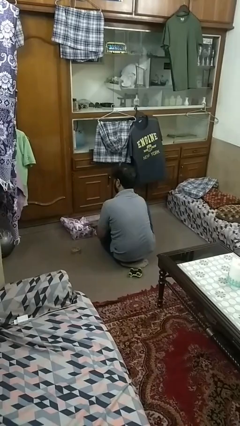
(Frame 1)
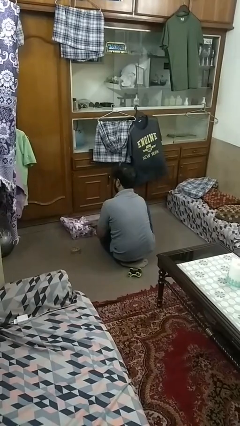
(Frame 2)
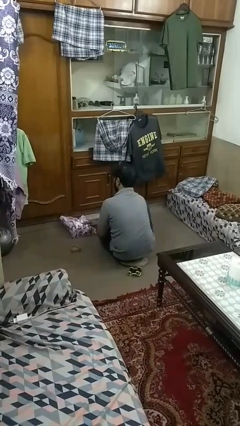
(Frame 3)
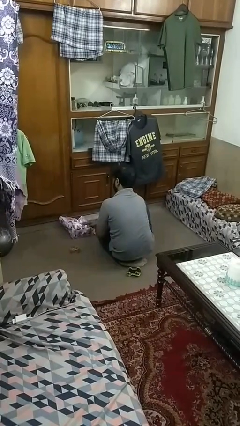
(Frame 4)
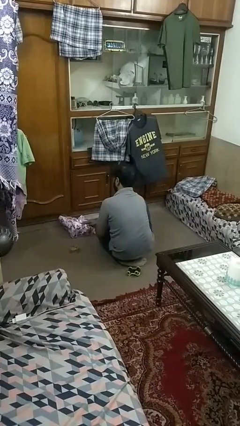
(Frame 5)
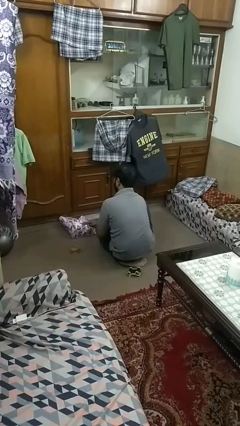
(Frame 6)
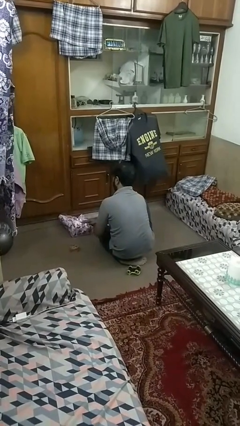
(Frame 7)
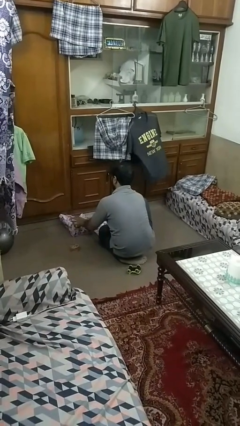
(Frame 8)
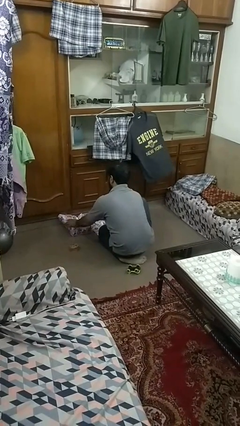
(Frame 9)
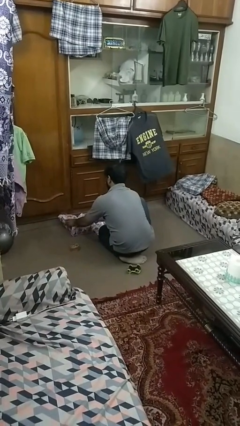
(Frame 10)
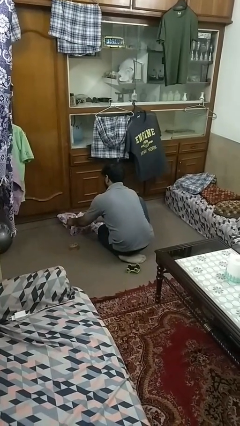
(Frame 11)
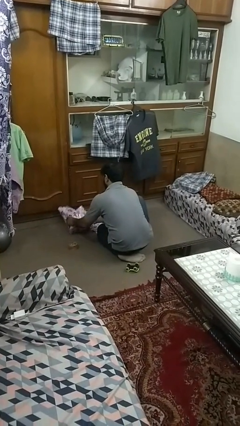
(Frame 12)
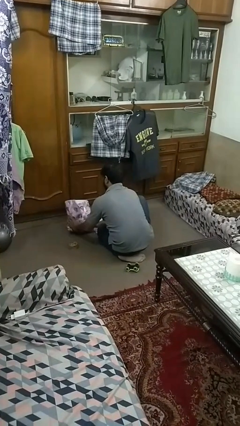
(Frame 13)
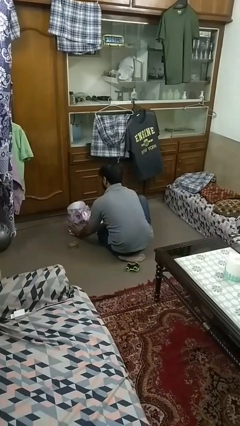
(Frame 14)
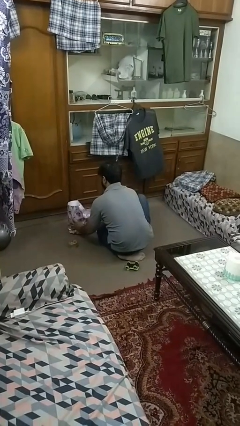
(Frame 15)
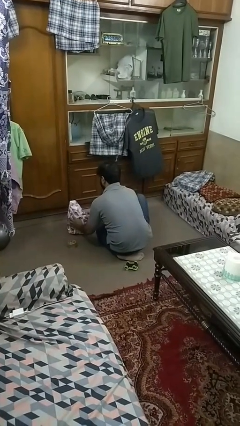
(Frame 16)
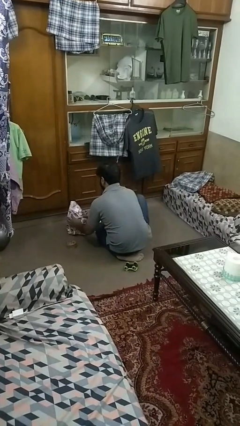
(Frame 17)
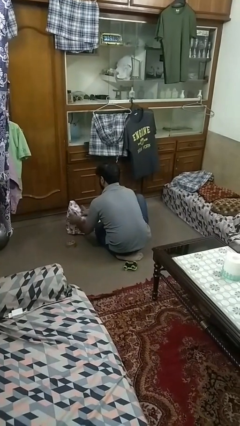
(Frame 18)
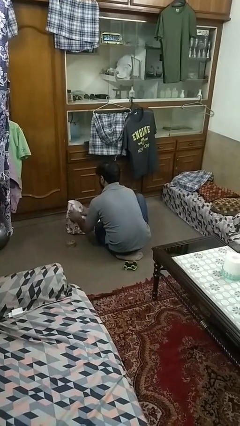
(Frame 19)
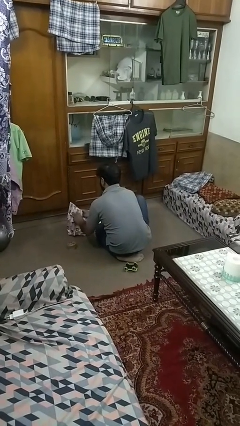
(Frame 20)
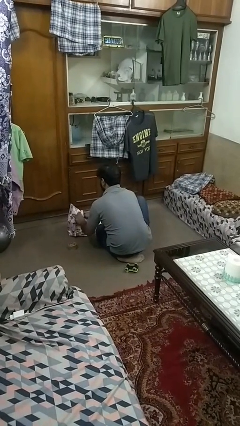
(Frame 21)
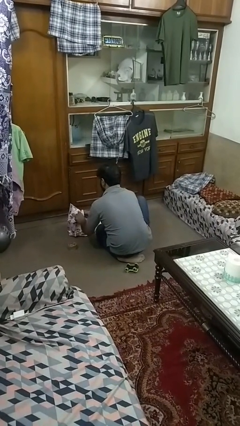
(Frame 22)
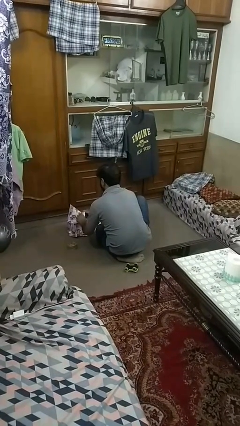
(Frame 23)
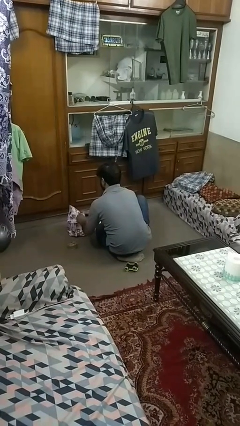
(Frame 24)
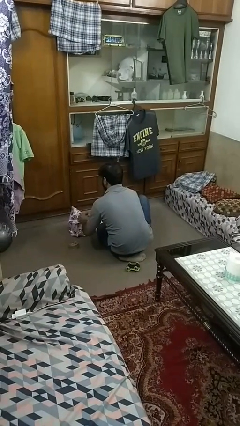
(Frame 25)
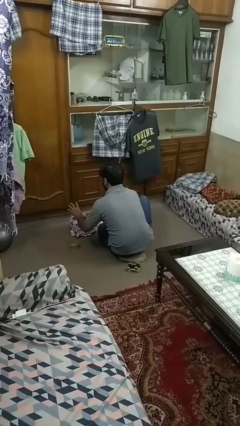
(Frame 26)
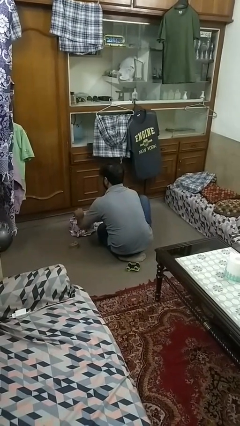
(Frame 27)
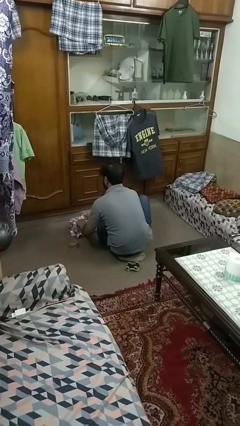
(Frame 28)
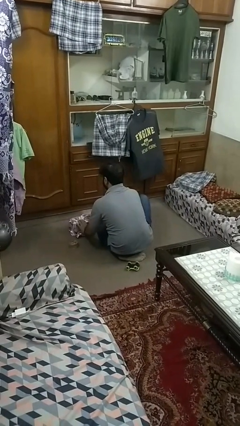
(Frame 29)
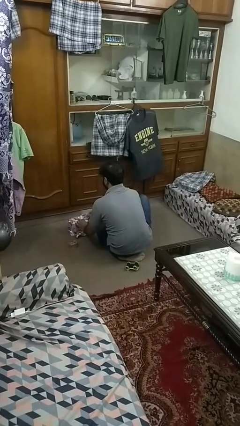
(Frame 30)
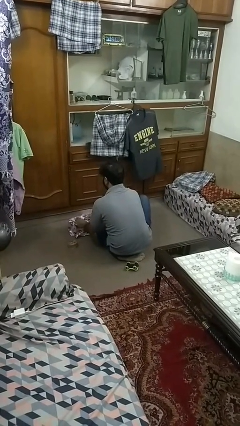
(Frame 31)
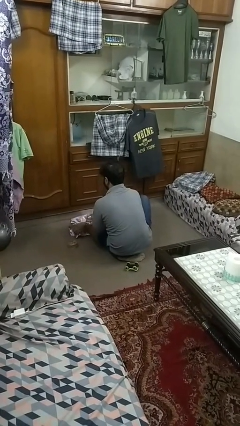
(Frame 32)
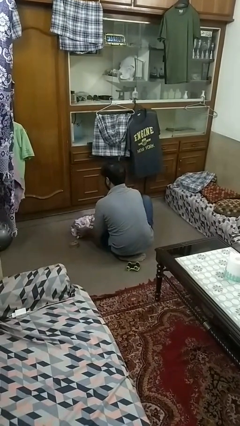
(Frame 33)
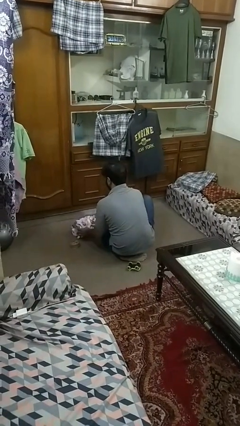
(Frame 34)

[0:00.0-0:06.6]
person wraps box

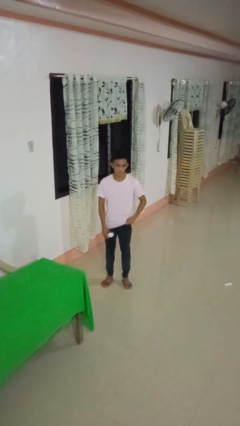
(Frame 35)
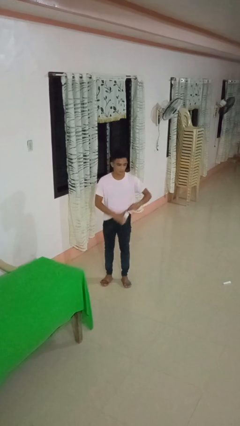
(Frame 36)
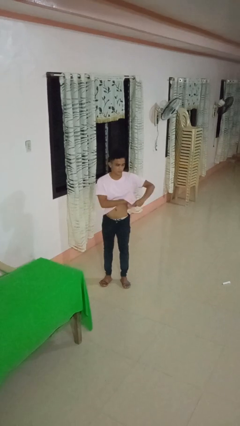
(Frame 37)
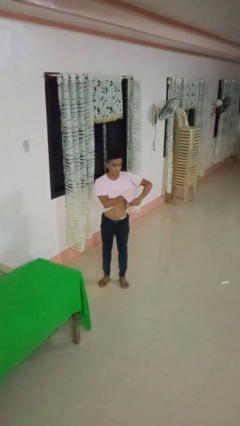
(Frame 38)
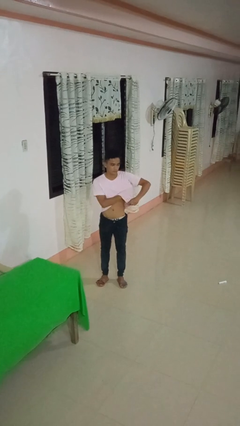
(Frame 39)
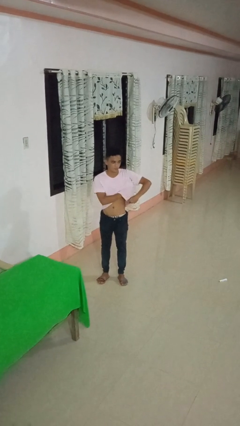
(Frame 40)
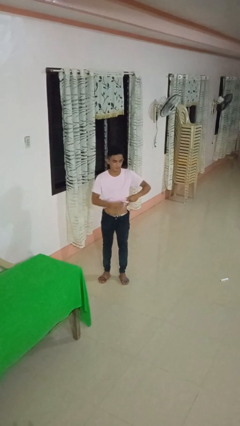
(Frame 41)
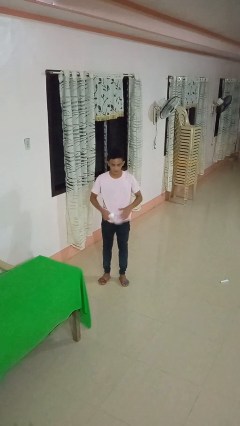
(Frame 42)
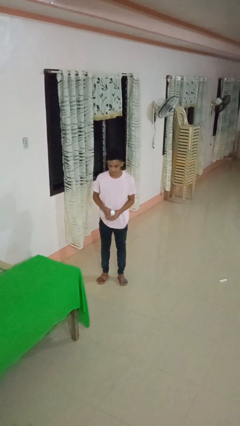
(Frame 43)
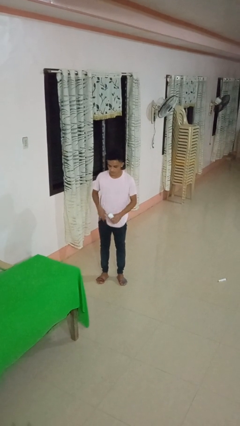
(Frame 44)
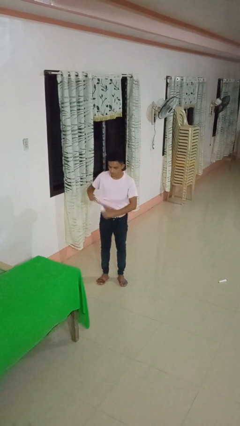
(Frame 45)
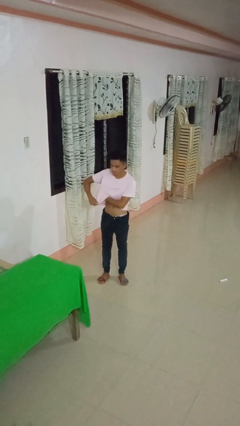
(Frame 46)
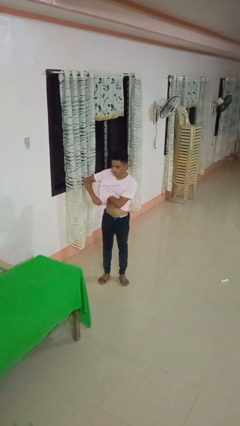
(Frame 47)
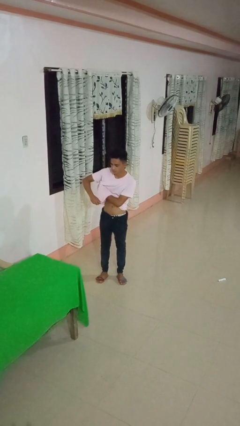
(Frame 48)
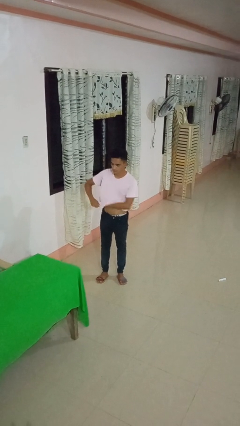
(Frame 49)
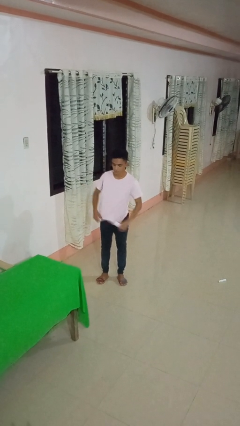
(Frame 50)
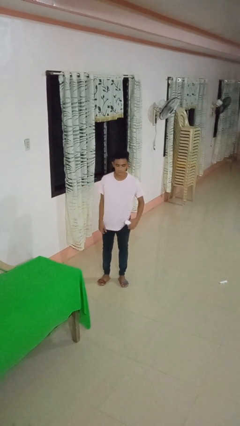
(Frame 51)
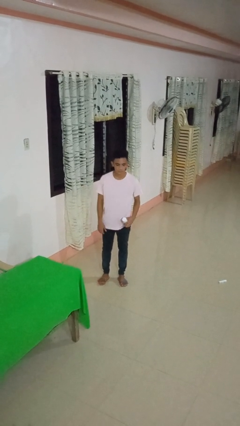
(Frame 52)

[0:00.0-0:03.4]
person applies deodorant

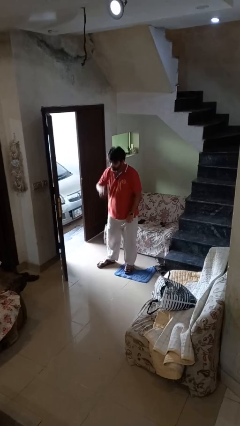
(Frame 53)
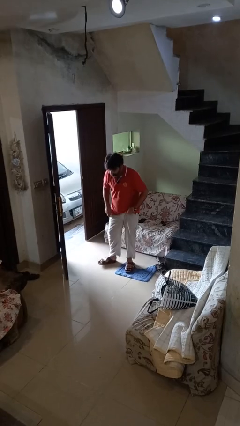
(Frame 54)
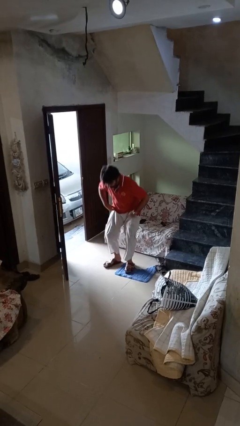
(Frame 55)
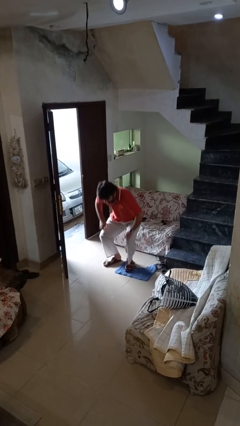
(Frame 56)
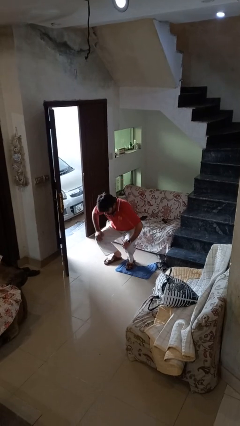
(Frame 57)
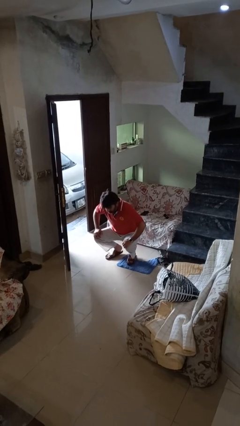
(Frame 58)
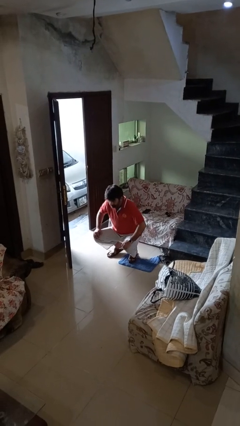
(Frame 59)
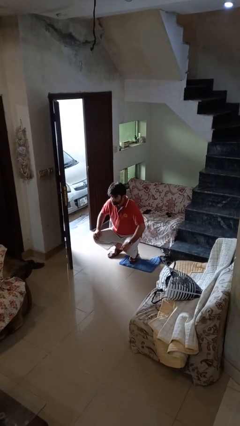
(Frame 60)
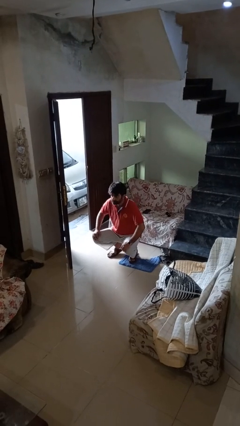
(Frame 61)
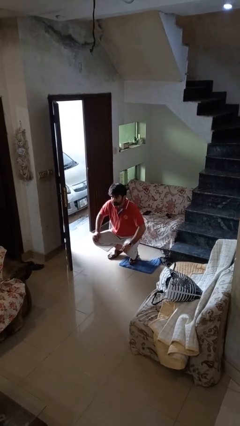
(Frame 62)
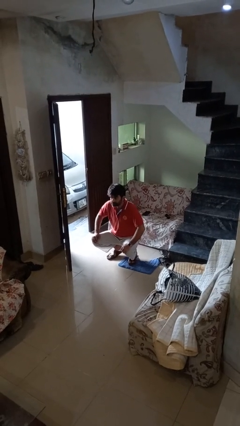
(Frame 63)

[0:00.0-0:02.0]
person squats

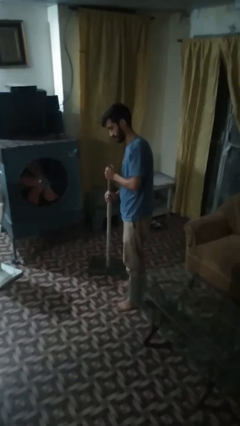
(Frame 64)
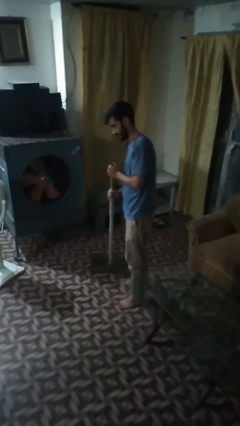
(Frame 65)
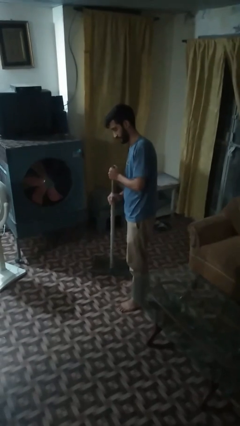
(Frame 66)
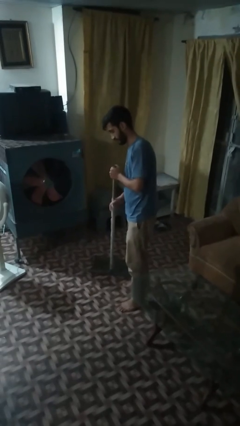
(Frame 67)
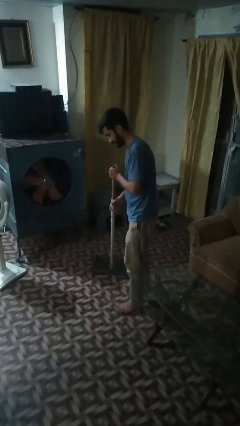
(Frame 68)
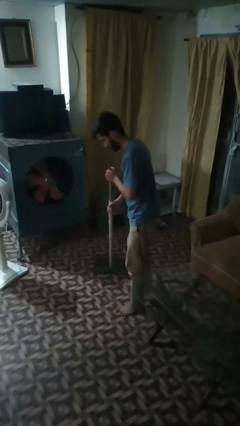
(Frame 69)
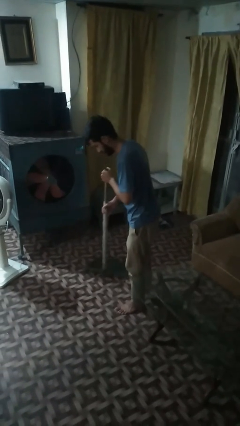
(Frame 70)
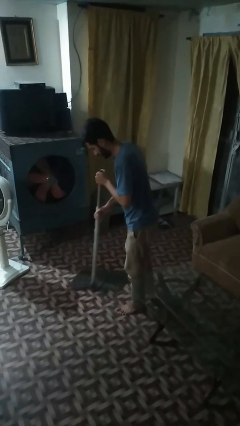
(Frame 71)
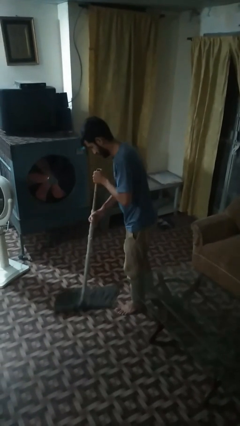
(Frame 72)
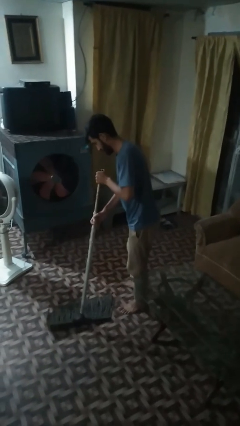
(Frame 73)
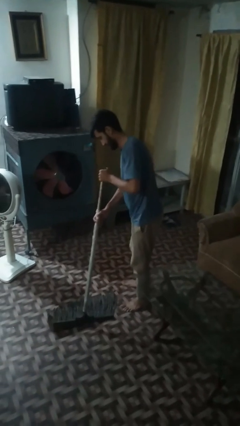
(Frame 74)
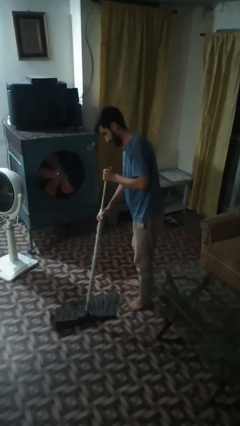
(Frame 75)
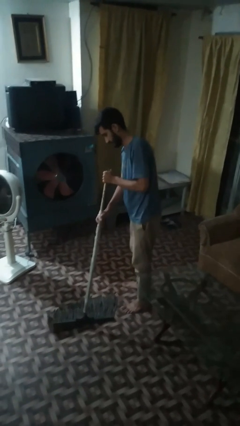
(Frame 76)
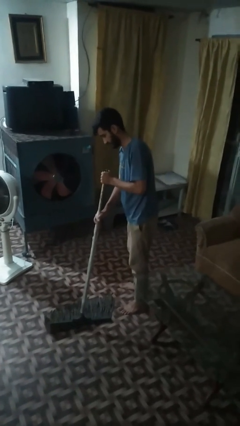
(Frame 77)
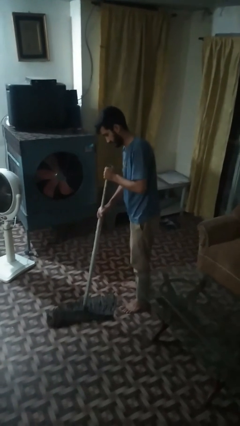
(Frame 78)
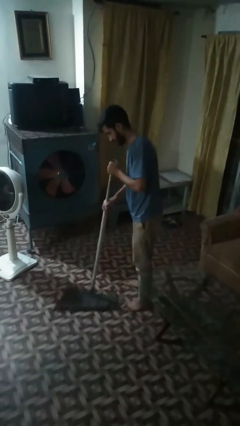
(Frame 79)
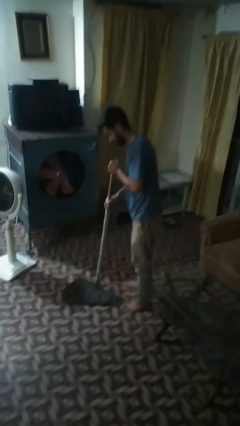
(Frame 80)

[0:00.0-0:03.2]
person mops

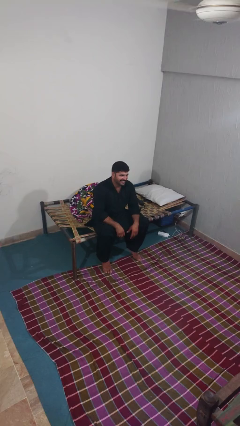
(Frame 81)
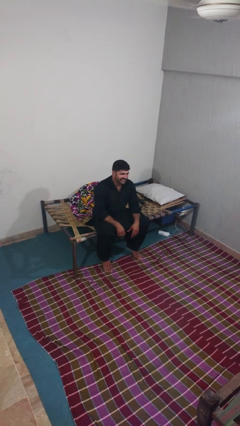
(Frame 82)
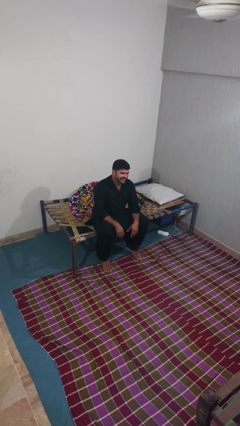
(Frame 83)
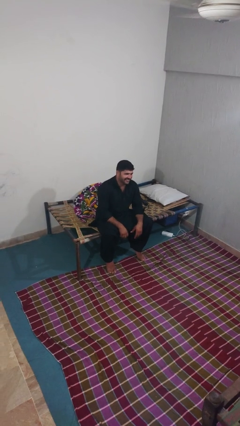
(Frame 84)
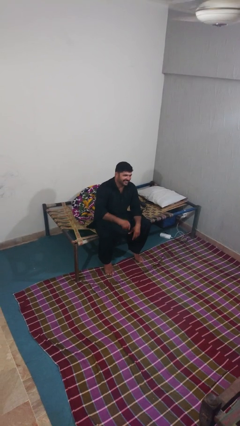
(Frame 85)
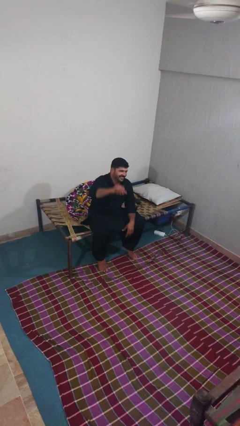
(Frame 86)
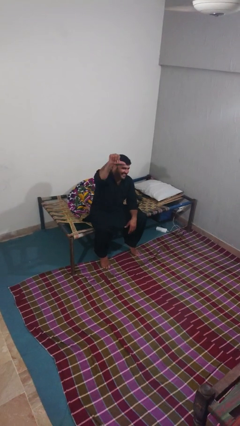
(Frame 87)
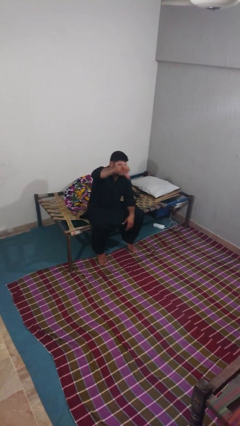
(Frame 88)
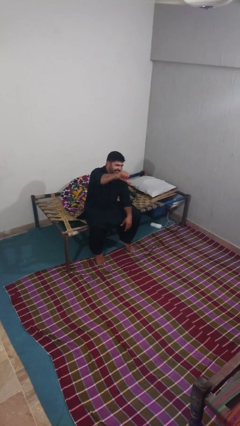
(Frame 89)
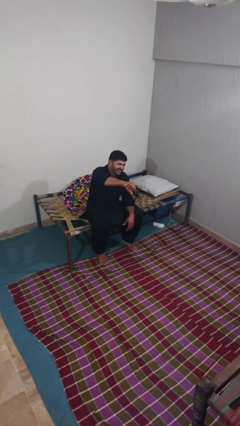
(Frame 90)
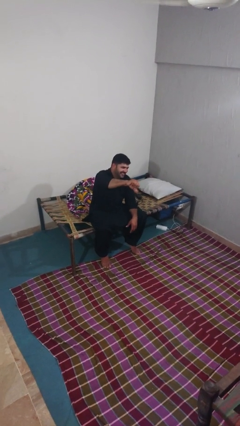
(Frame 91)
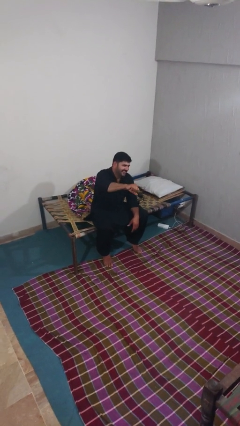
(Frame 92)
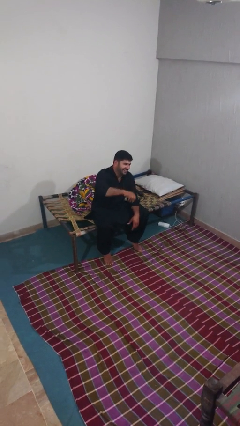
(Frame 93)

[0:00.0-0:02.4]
person gestures thumbs down
